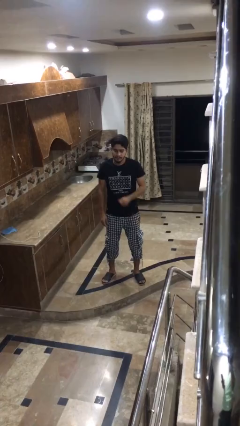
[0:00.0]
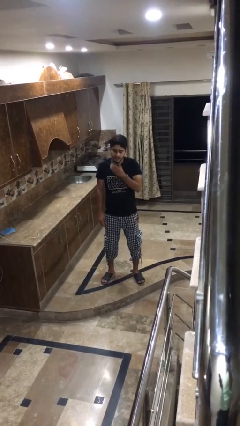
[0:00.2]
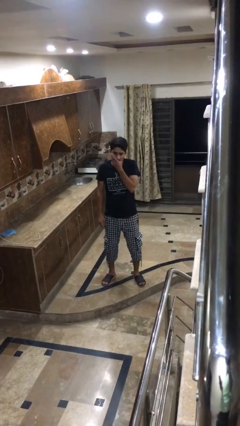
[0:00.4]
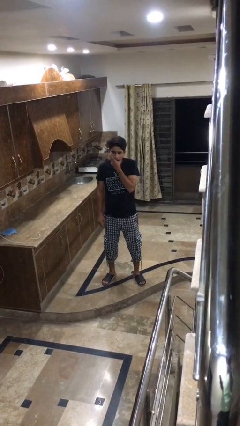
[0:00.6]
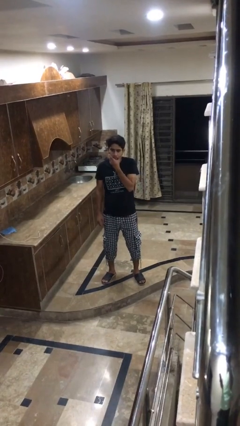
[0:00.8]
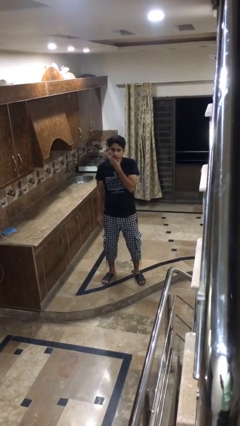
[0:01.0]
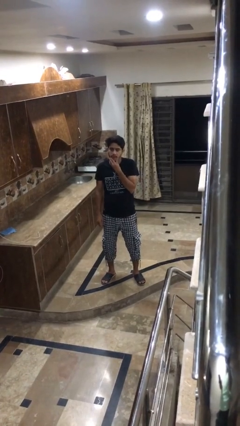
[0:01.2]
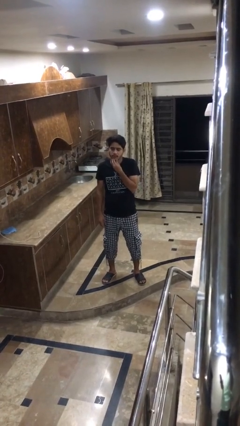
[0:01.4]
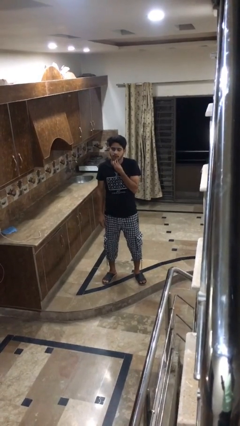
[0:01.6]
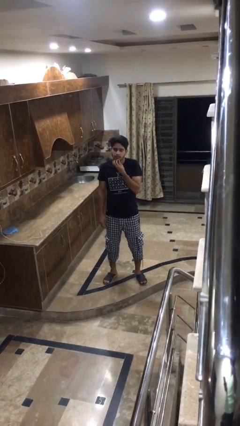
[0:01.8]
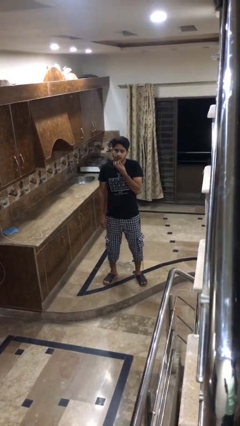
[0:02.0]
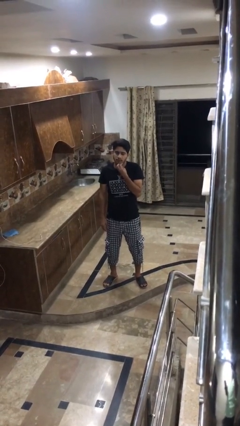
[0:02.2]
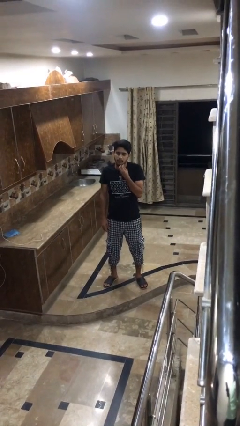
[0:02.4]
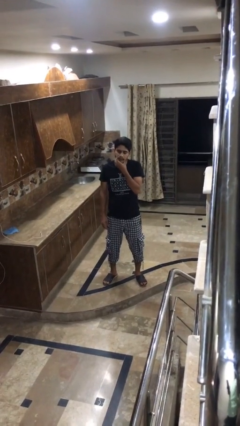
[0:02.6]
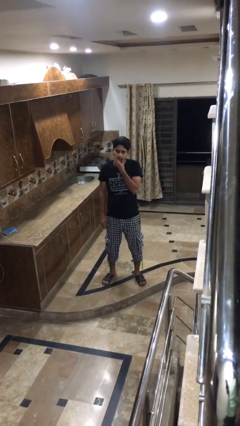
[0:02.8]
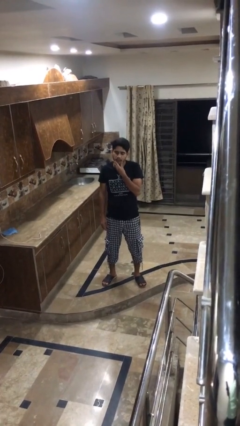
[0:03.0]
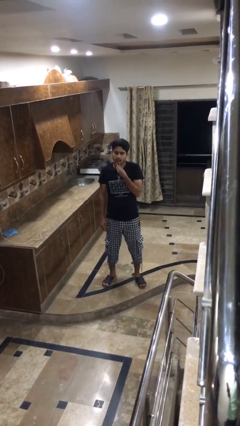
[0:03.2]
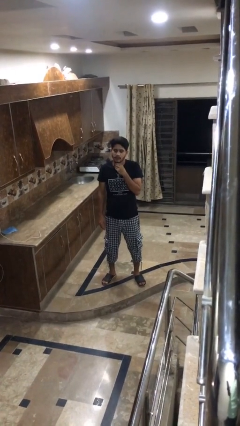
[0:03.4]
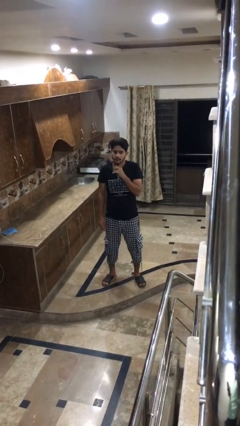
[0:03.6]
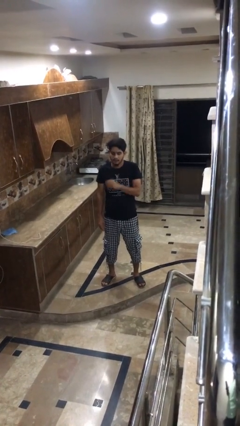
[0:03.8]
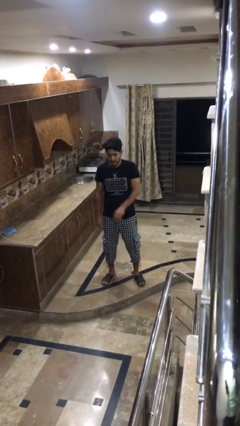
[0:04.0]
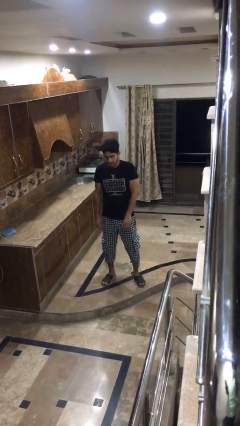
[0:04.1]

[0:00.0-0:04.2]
person strokes chin

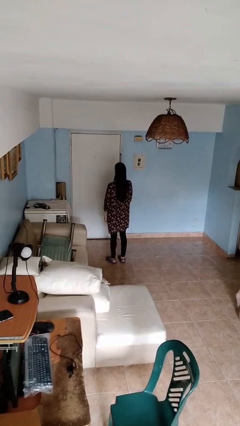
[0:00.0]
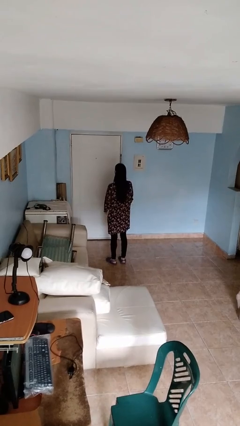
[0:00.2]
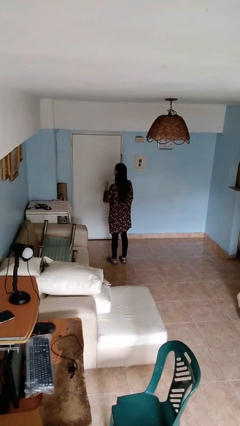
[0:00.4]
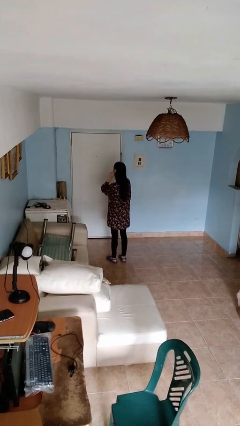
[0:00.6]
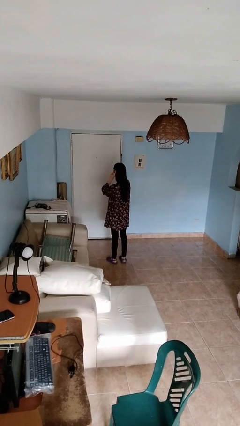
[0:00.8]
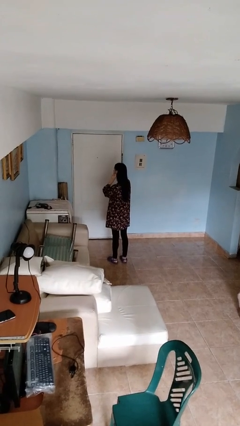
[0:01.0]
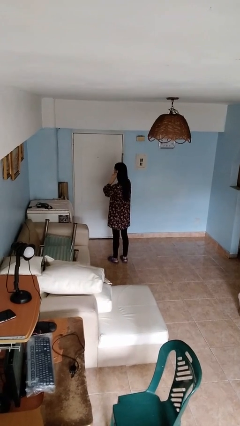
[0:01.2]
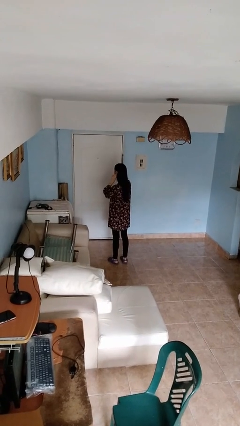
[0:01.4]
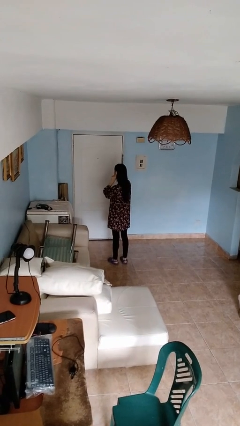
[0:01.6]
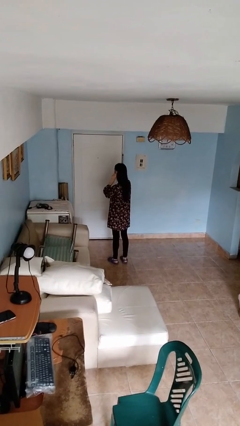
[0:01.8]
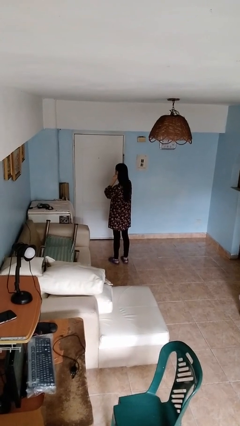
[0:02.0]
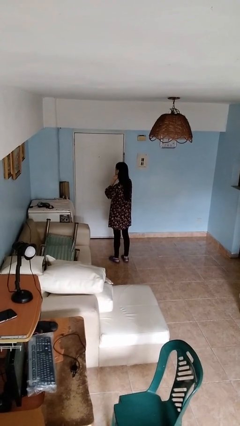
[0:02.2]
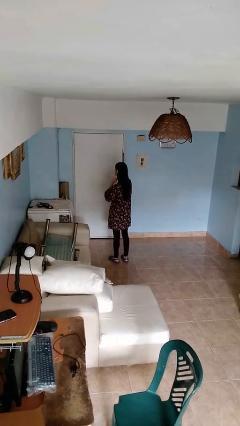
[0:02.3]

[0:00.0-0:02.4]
person touches earlobe

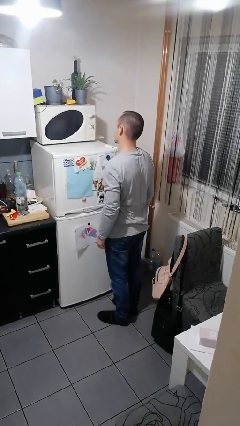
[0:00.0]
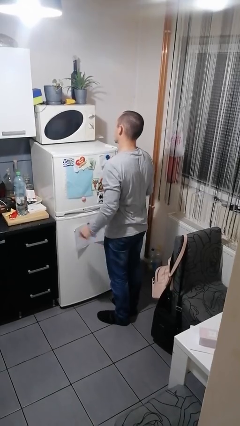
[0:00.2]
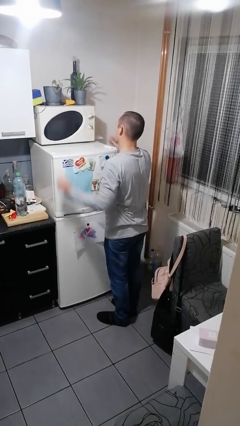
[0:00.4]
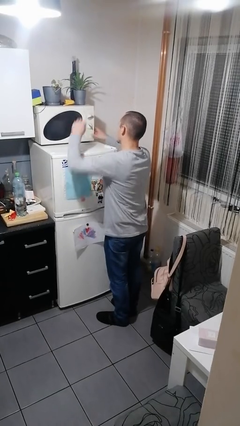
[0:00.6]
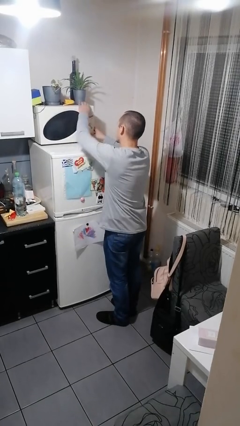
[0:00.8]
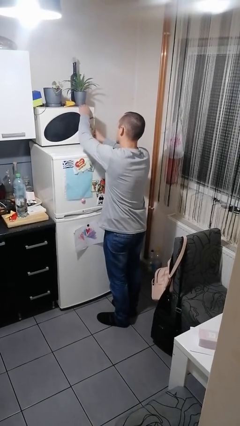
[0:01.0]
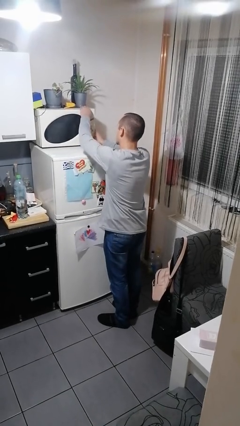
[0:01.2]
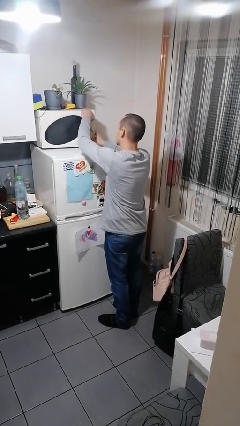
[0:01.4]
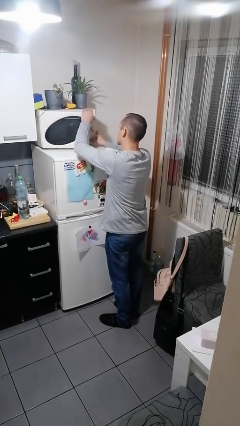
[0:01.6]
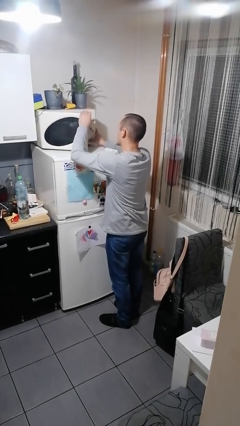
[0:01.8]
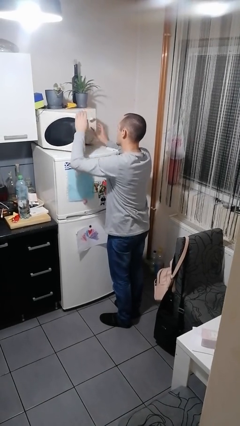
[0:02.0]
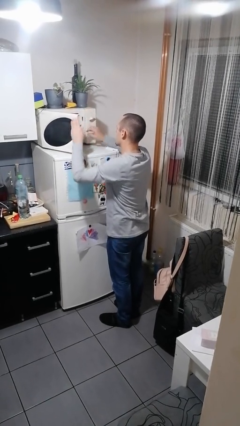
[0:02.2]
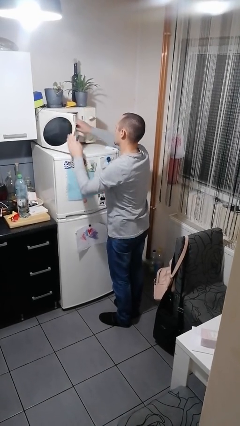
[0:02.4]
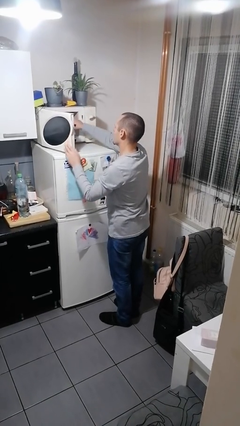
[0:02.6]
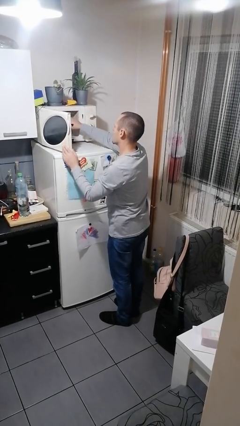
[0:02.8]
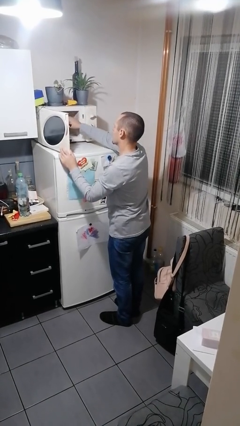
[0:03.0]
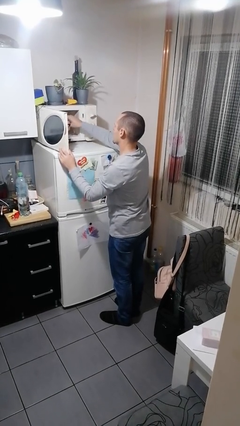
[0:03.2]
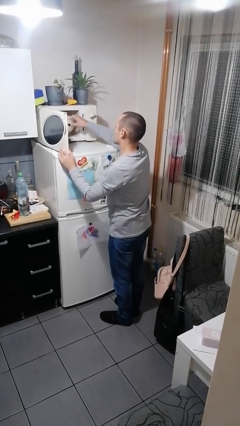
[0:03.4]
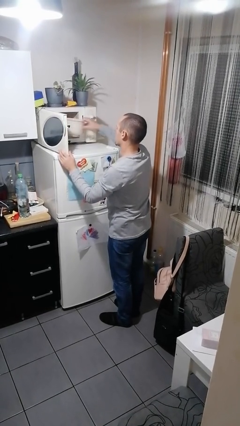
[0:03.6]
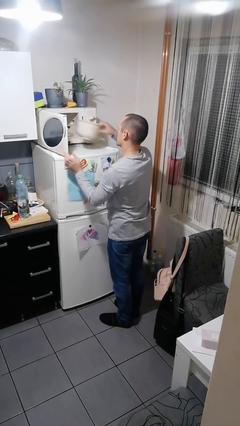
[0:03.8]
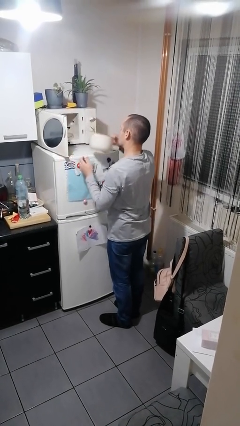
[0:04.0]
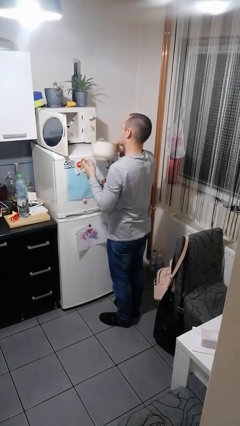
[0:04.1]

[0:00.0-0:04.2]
person takes object from microwave

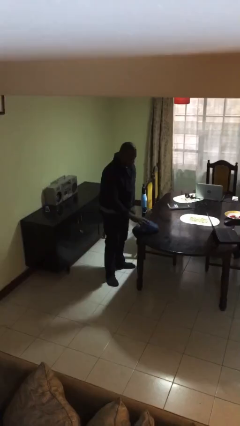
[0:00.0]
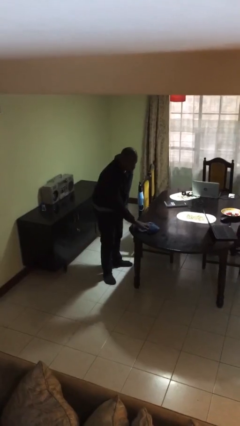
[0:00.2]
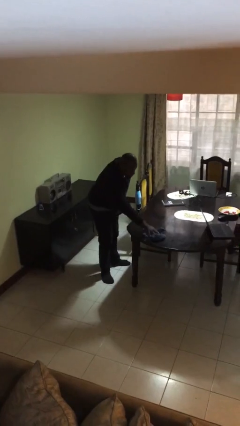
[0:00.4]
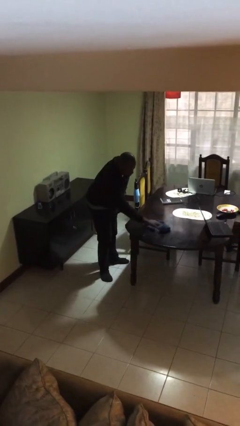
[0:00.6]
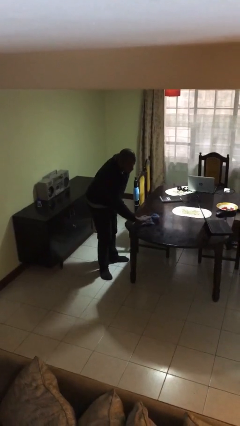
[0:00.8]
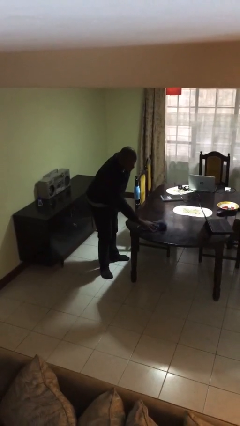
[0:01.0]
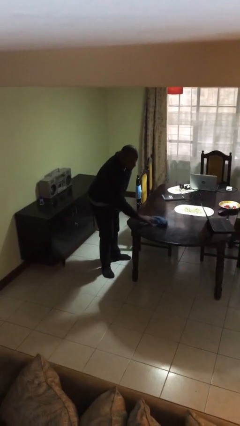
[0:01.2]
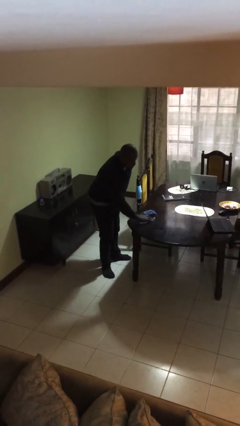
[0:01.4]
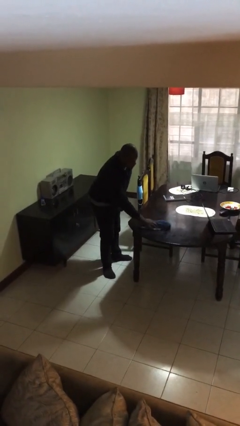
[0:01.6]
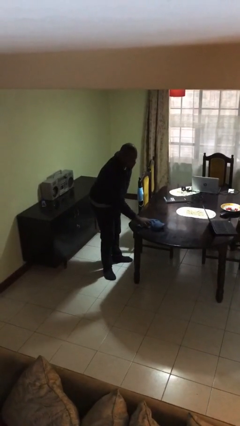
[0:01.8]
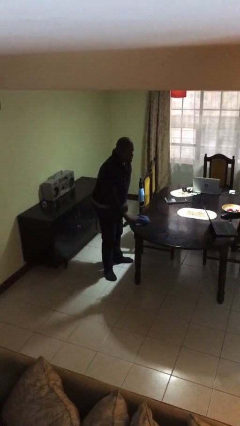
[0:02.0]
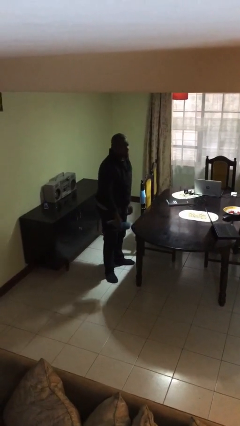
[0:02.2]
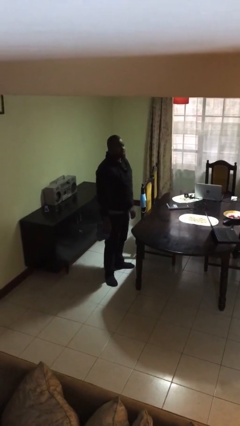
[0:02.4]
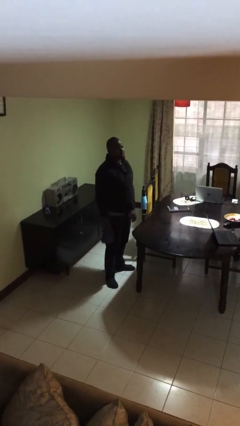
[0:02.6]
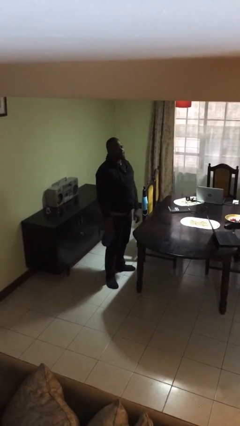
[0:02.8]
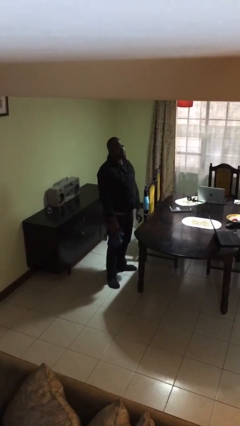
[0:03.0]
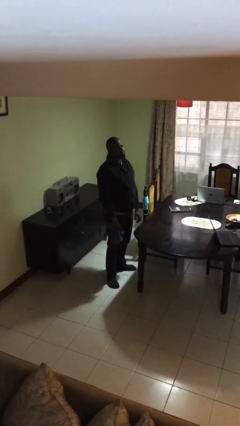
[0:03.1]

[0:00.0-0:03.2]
person cleans table with rag

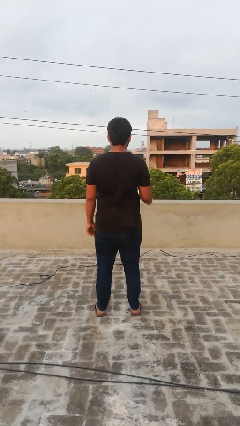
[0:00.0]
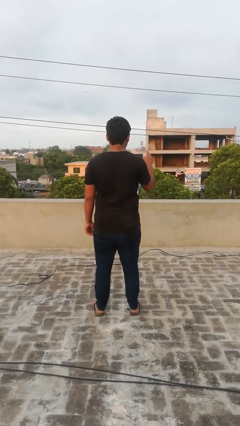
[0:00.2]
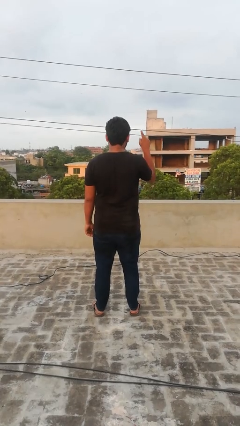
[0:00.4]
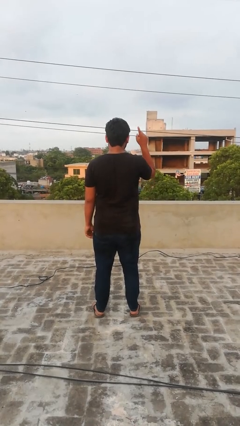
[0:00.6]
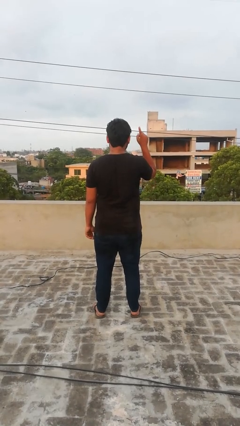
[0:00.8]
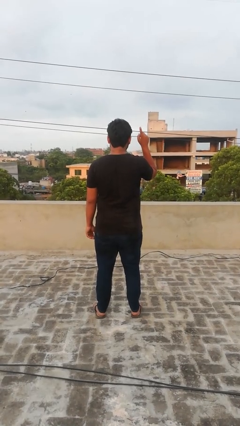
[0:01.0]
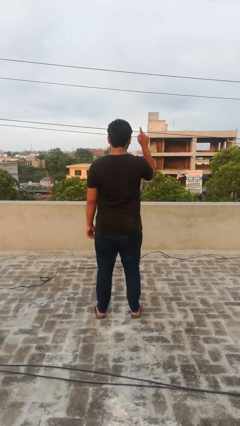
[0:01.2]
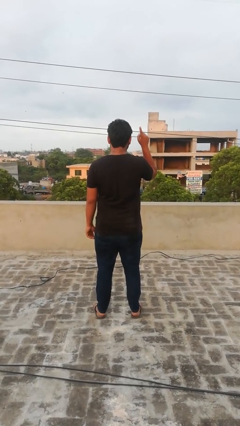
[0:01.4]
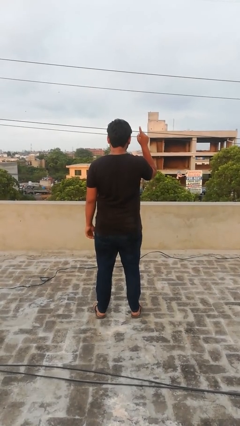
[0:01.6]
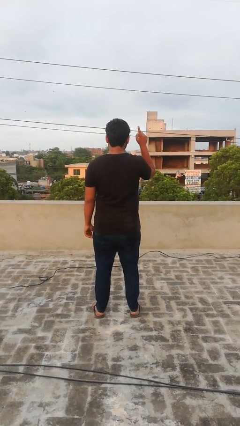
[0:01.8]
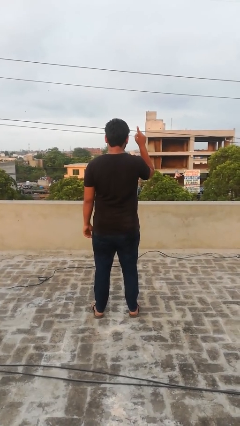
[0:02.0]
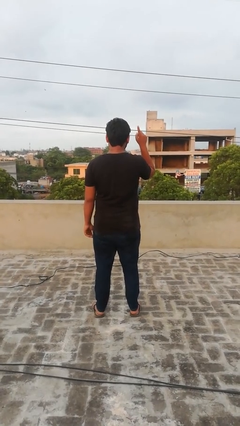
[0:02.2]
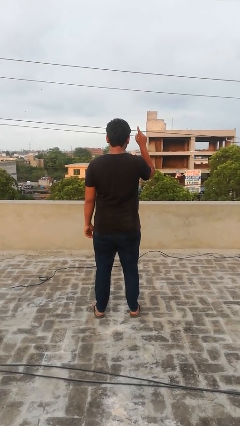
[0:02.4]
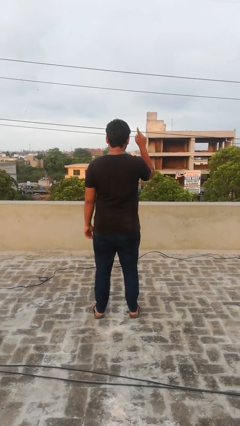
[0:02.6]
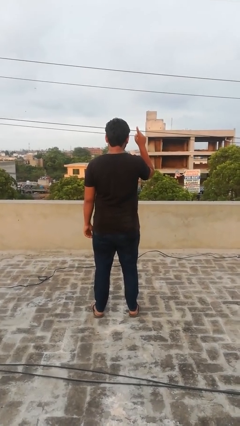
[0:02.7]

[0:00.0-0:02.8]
person gestures number one

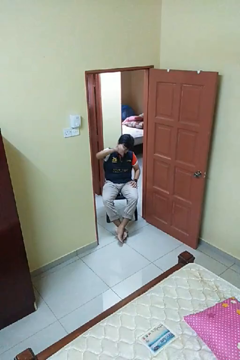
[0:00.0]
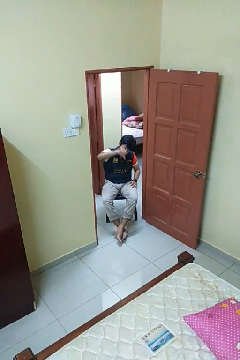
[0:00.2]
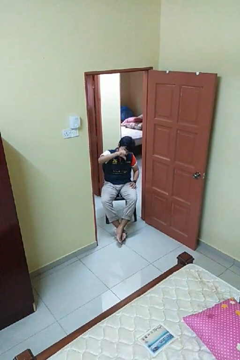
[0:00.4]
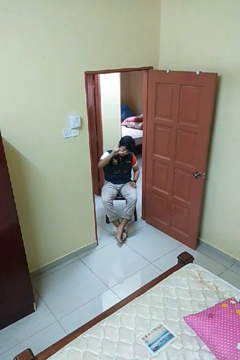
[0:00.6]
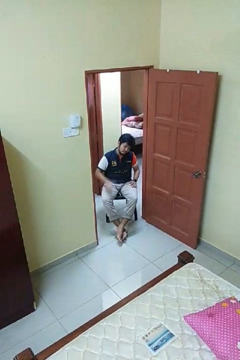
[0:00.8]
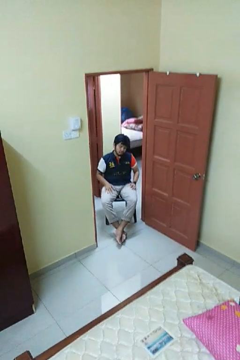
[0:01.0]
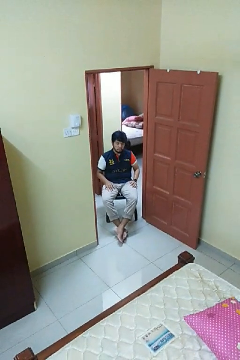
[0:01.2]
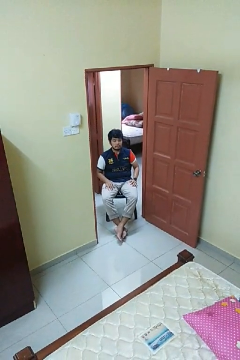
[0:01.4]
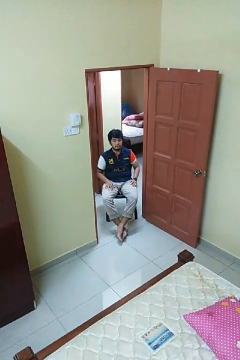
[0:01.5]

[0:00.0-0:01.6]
person gestures thumbs down
